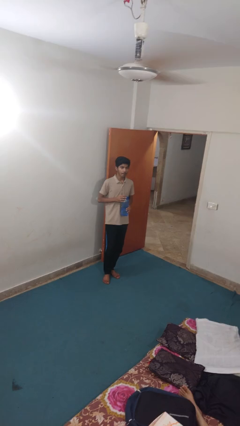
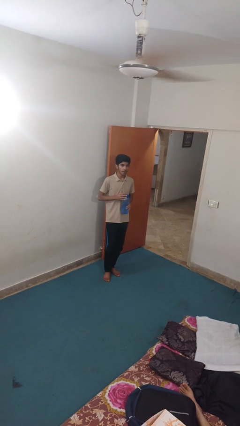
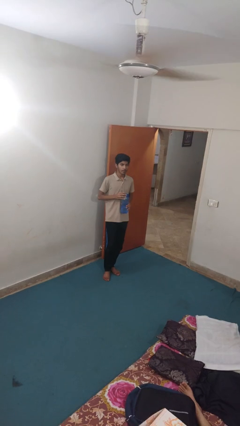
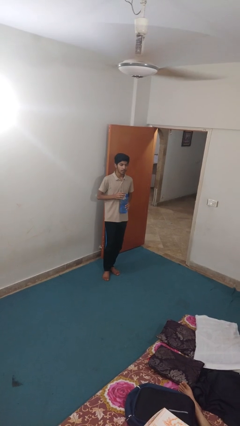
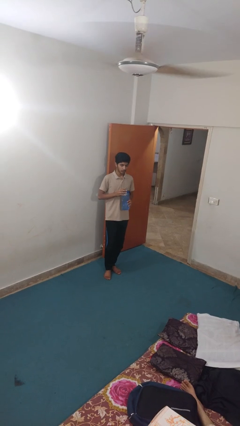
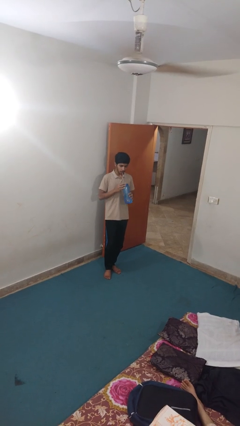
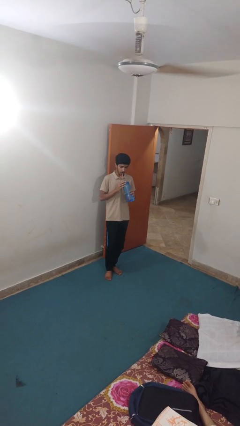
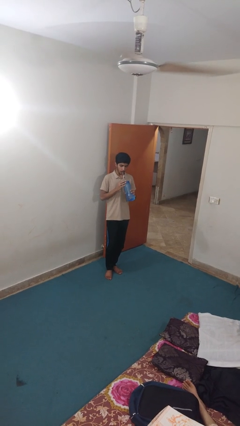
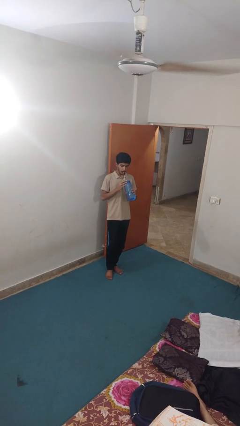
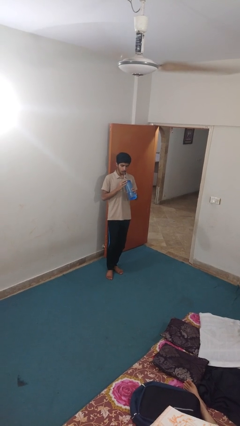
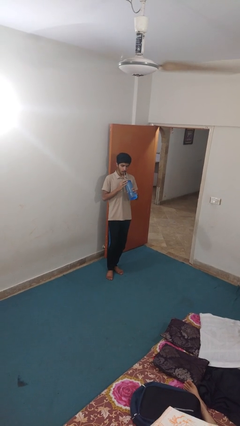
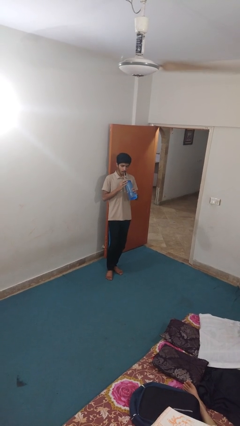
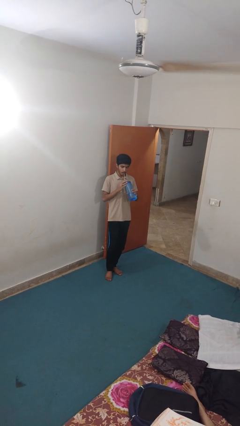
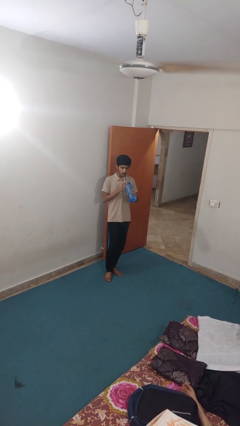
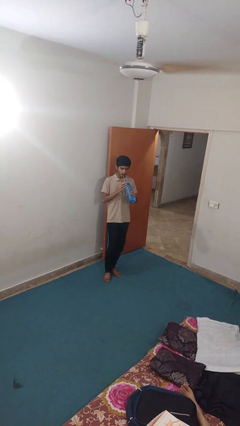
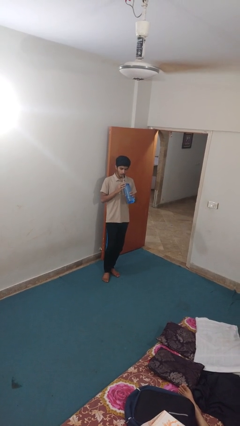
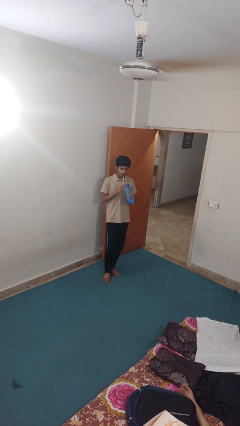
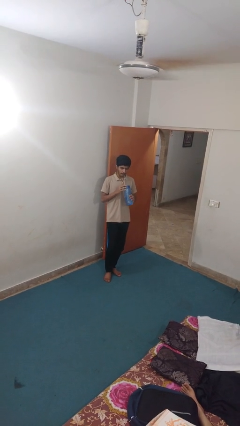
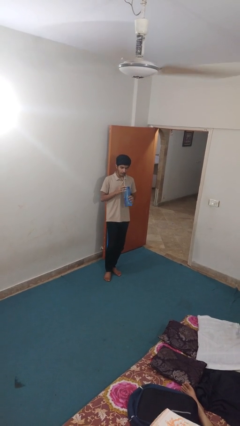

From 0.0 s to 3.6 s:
person drinks from straw

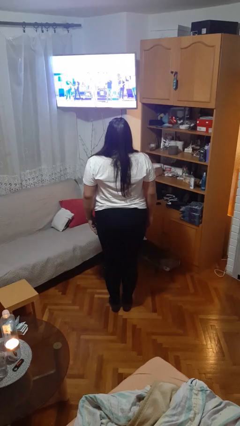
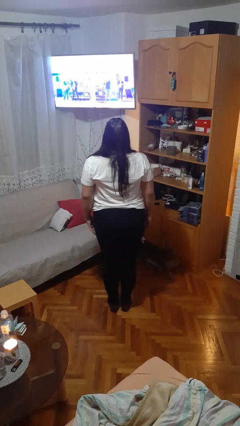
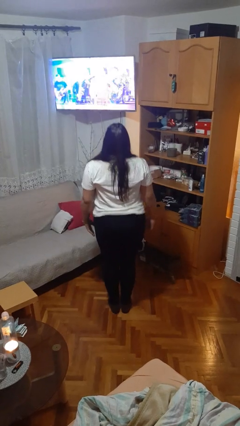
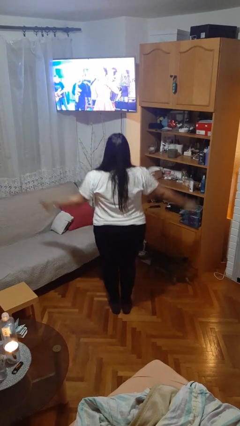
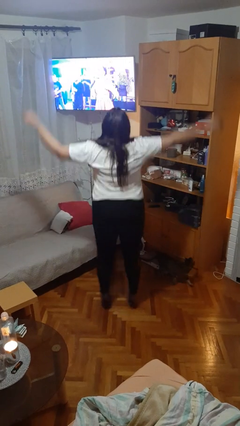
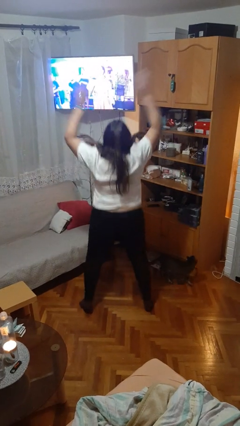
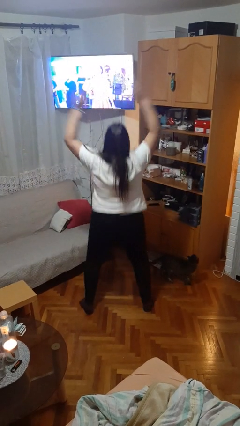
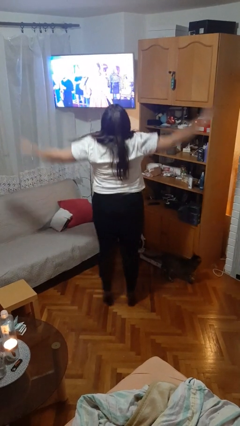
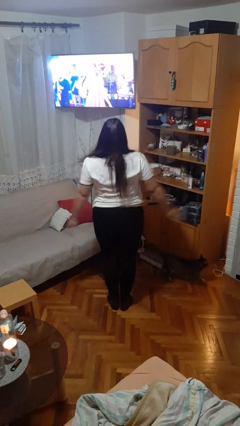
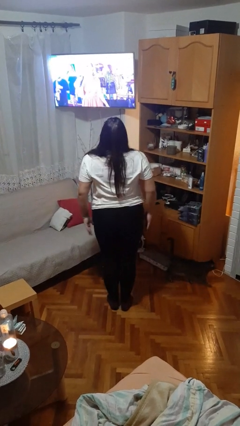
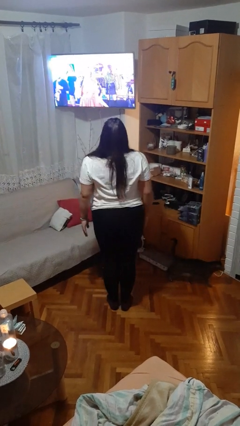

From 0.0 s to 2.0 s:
person exercises with jumping jacks

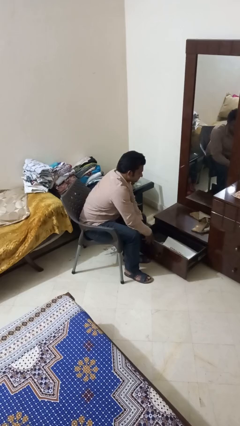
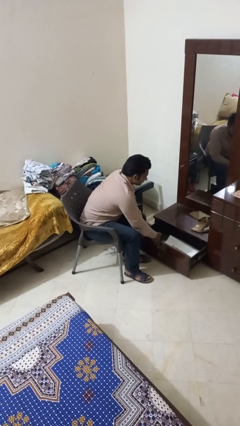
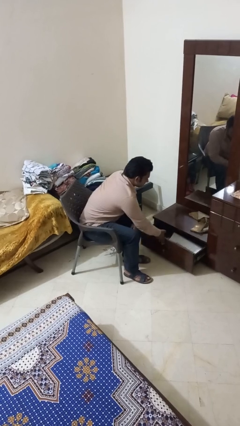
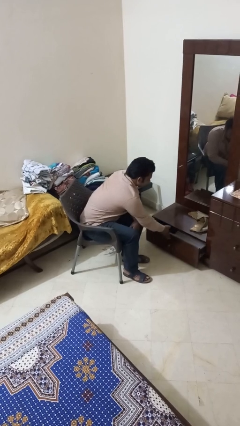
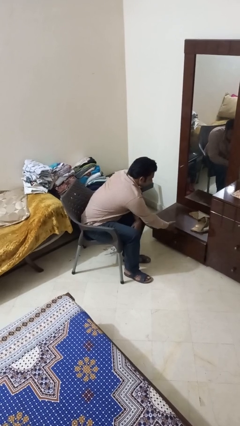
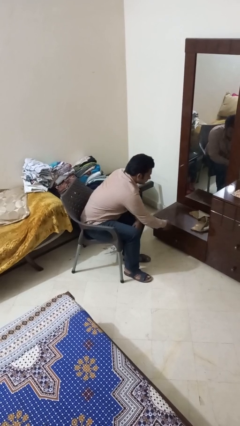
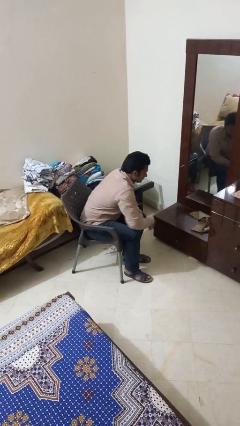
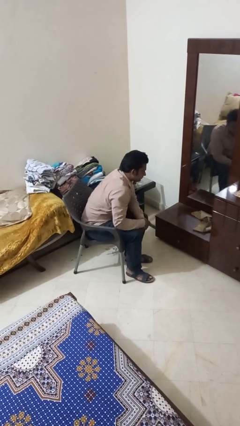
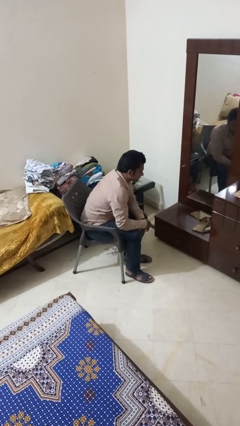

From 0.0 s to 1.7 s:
person closes closet door

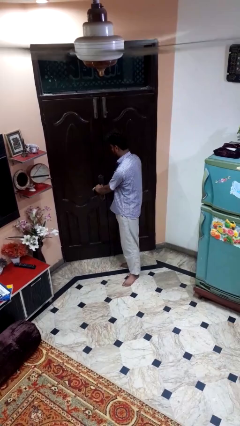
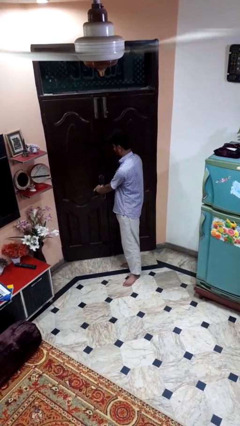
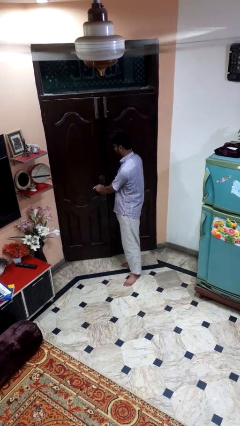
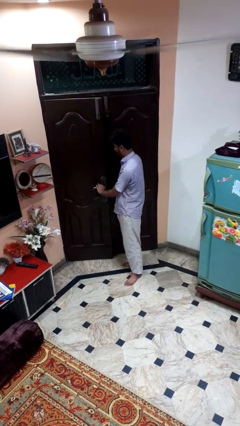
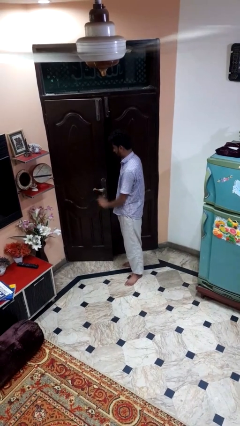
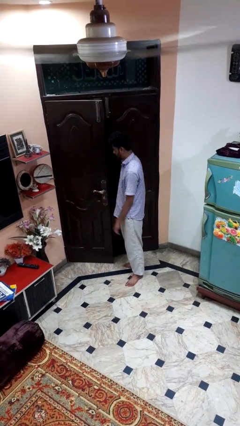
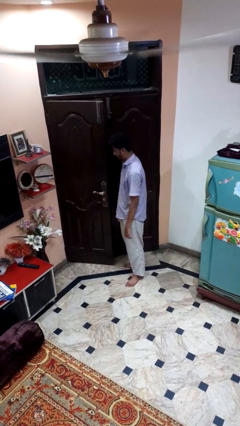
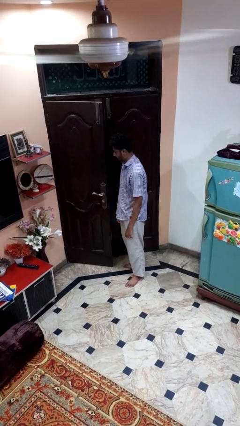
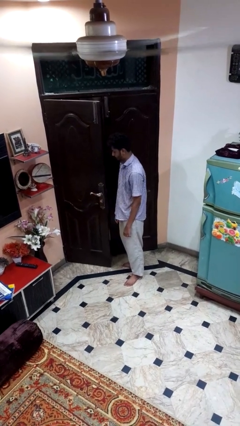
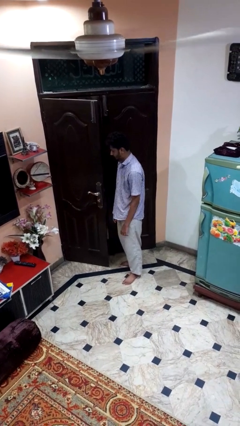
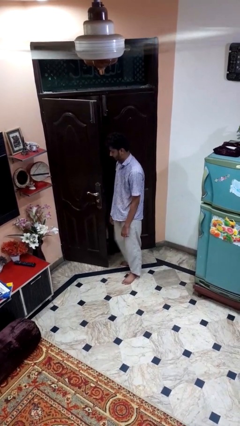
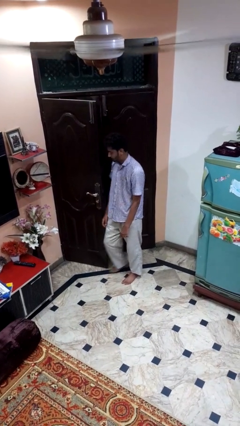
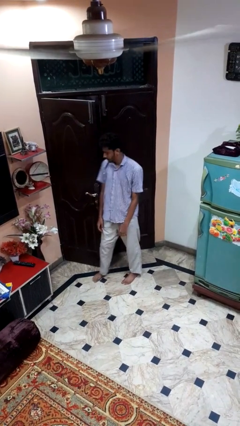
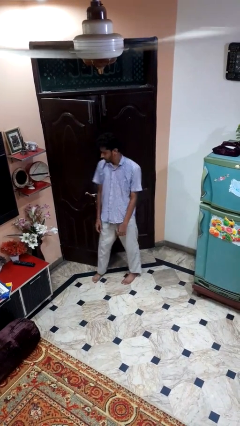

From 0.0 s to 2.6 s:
person opens facility door

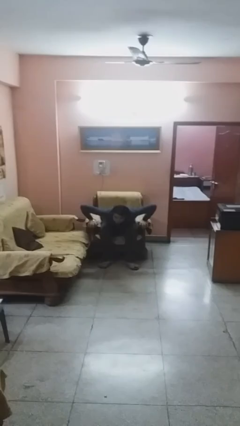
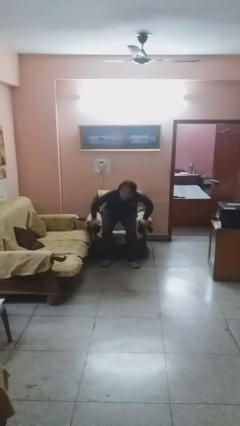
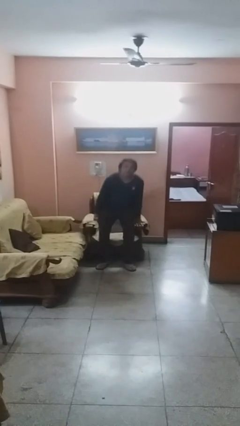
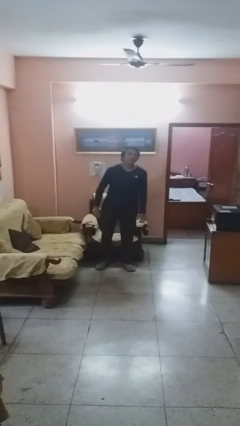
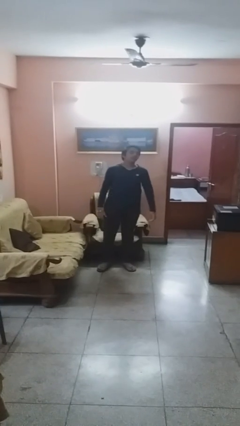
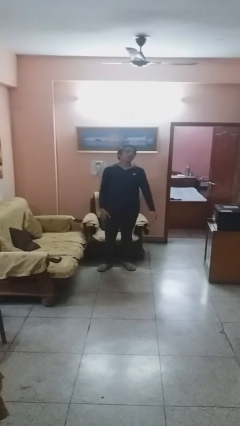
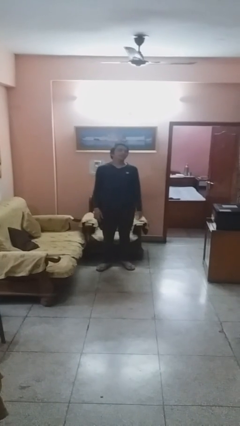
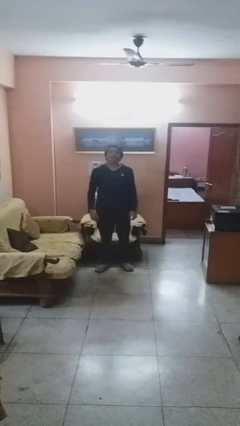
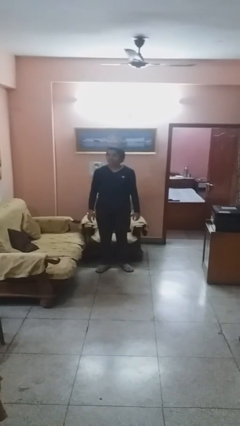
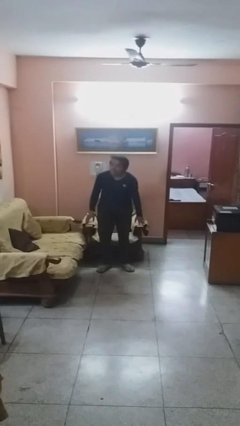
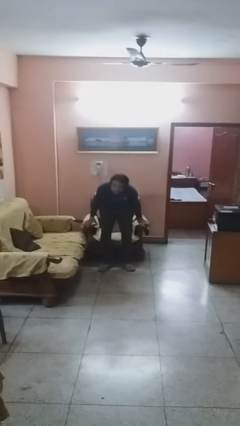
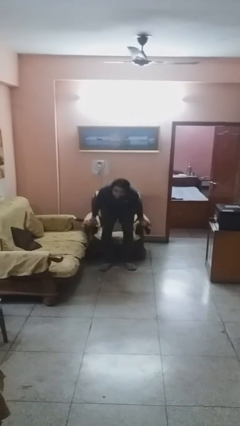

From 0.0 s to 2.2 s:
person stands up

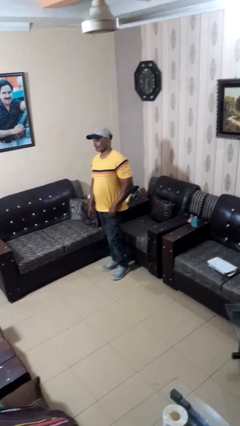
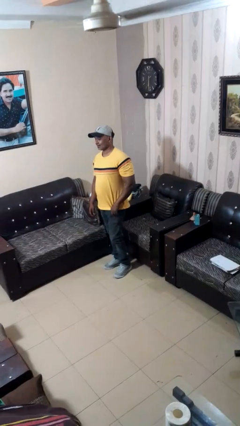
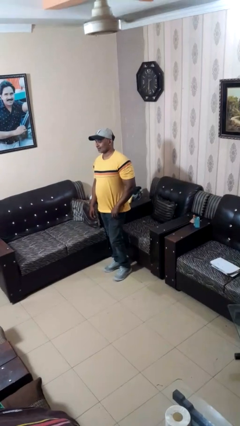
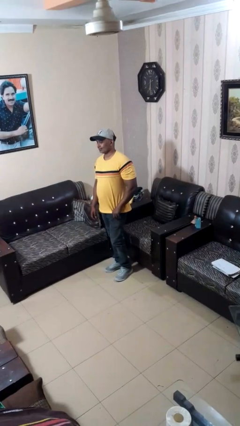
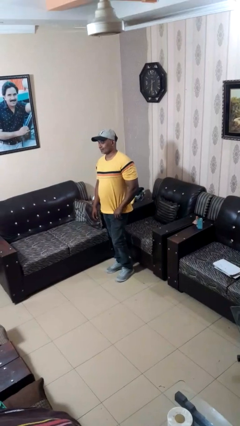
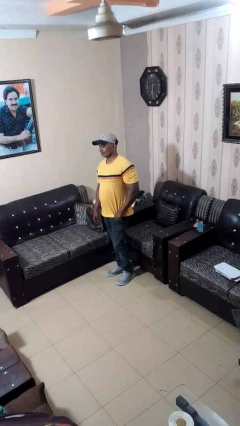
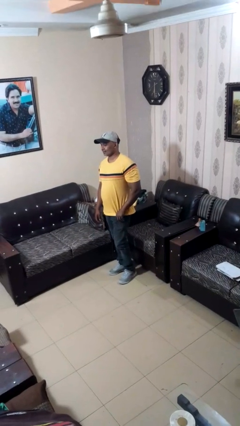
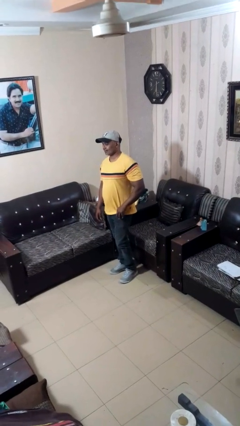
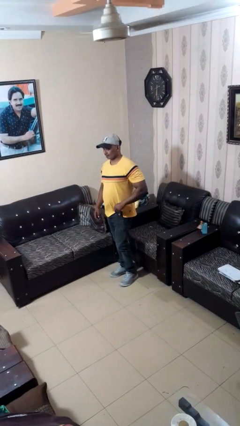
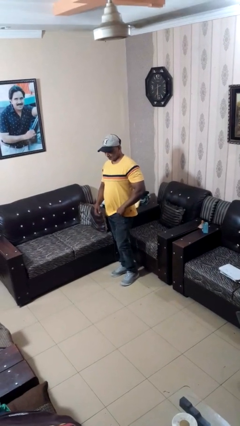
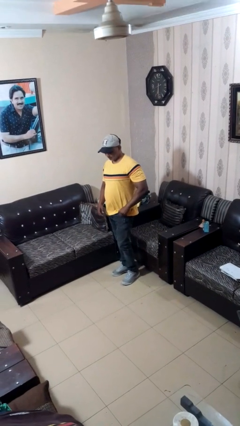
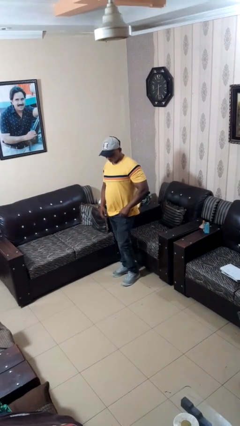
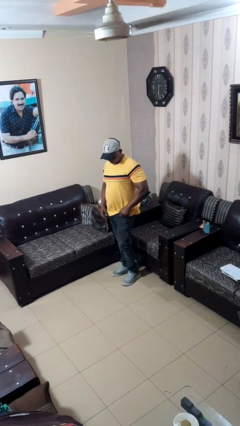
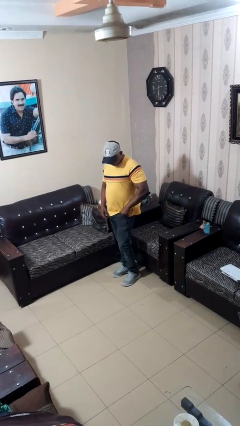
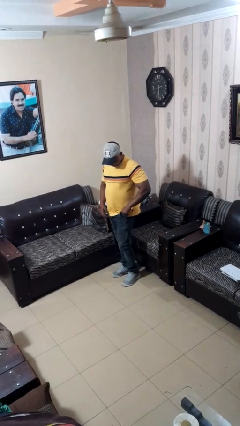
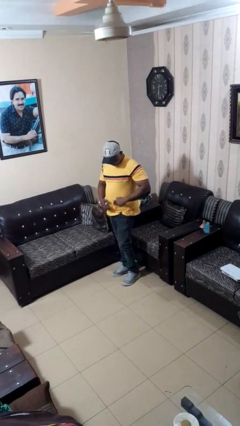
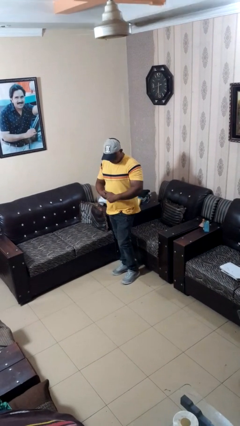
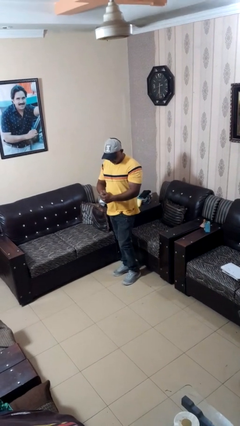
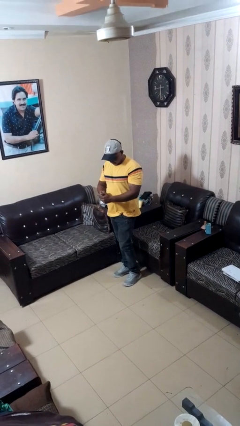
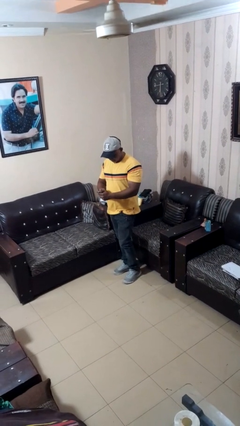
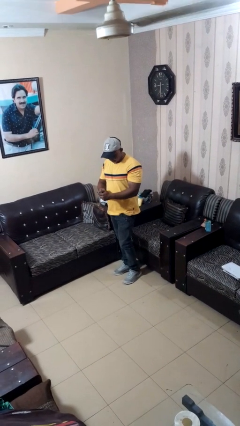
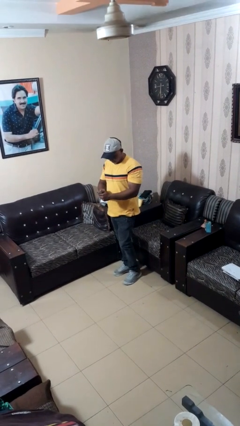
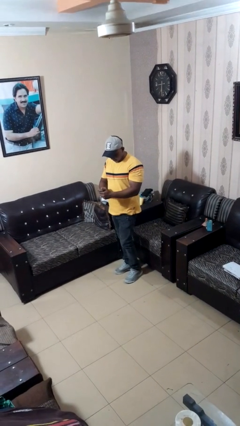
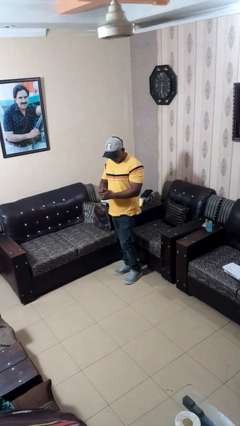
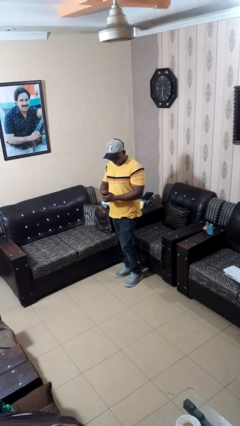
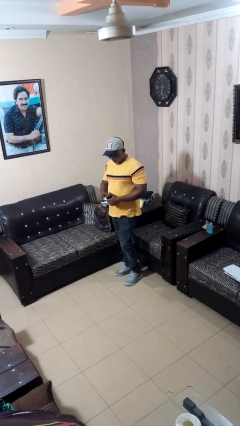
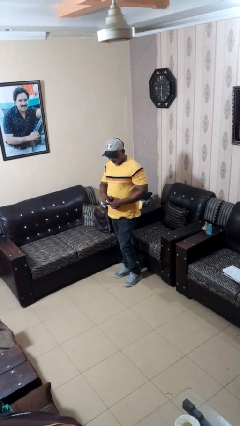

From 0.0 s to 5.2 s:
person takes phone from pocket

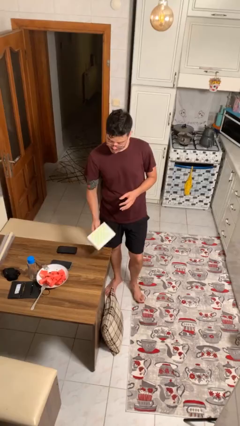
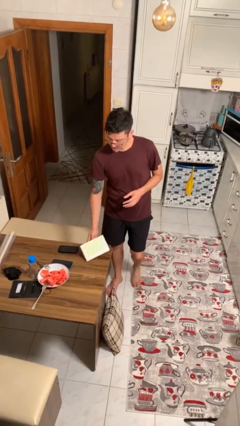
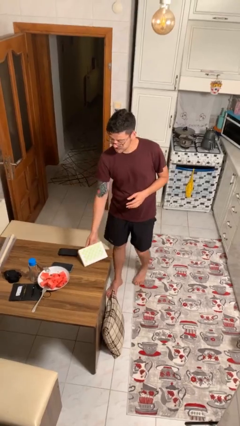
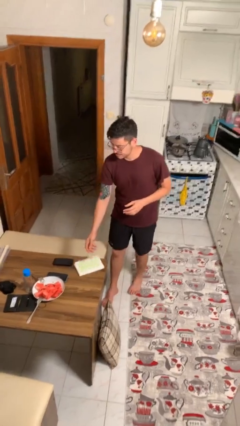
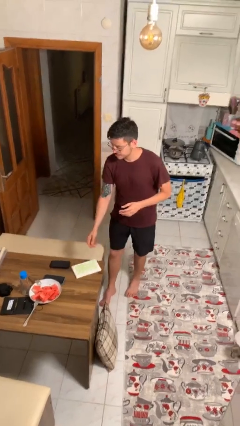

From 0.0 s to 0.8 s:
person puts down object on table
